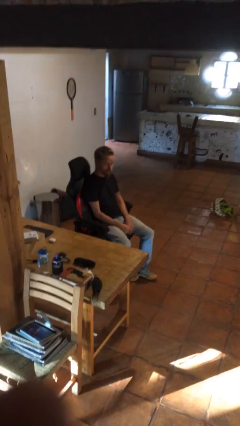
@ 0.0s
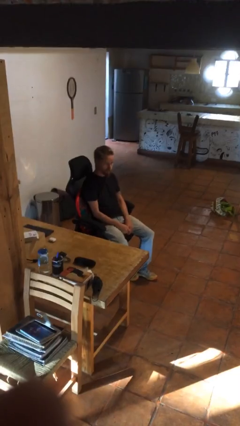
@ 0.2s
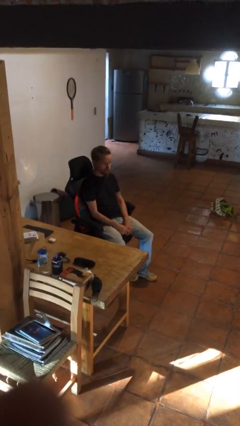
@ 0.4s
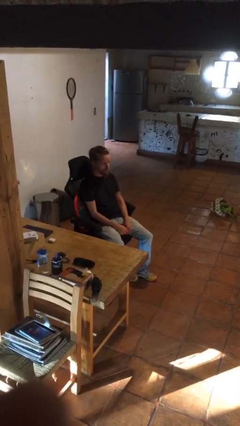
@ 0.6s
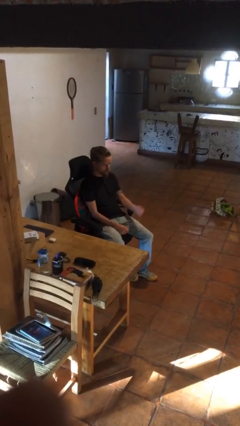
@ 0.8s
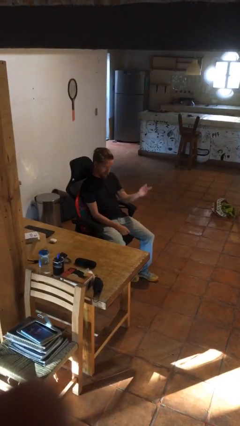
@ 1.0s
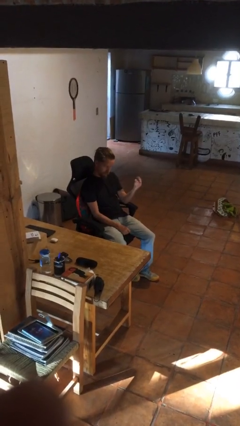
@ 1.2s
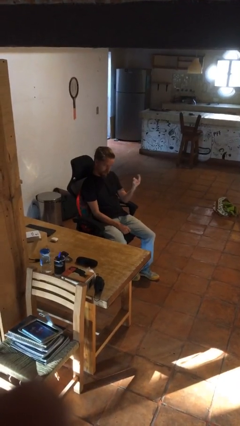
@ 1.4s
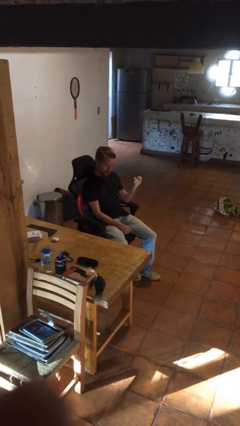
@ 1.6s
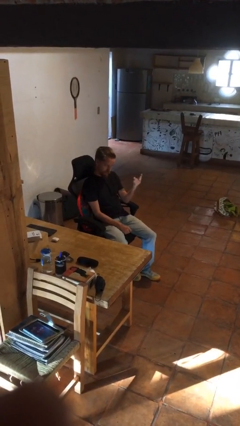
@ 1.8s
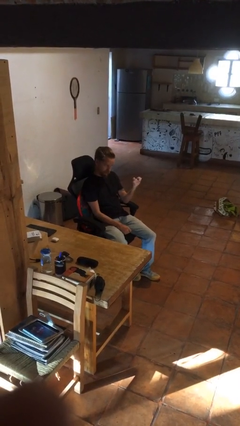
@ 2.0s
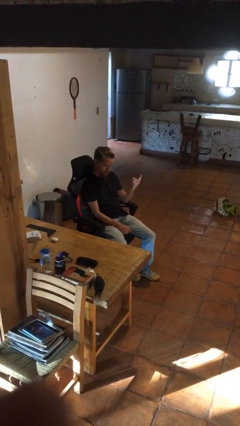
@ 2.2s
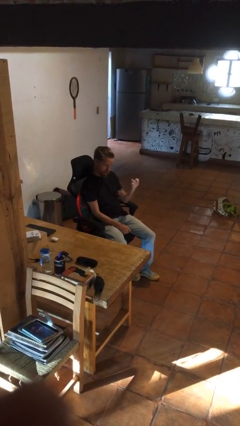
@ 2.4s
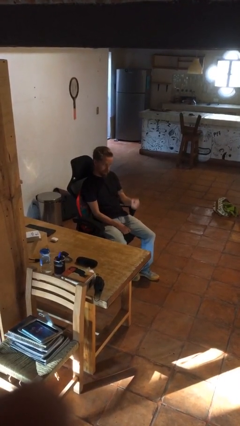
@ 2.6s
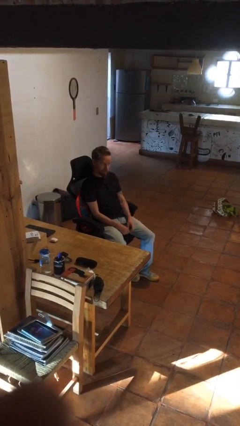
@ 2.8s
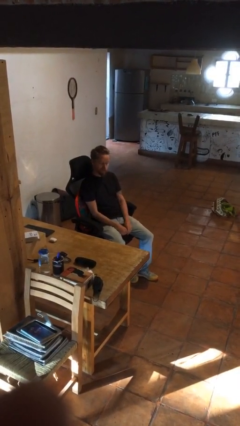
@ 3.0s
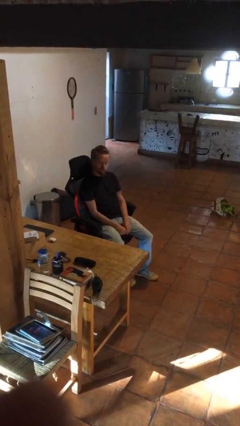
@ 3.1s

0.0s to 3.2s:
person gestures come here

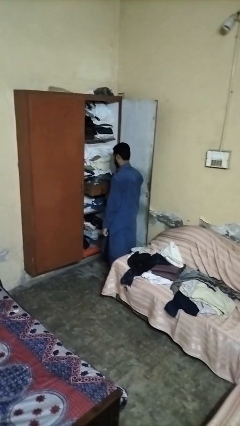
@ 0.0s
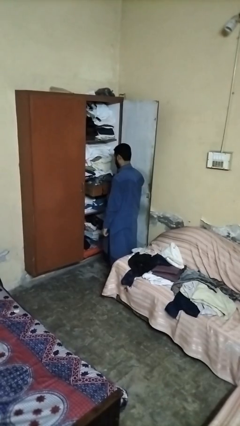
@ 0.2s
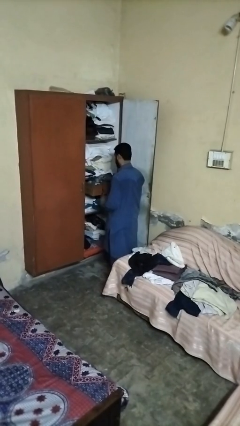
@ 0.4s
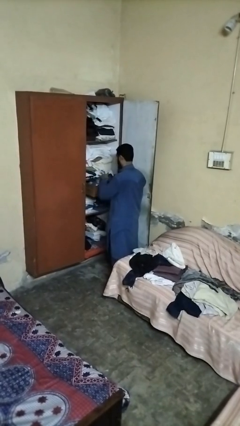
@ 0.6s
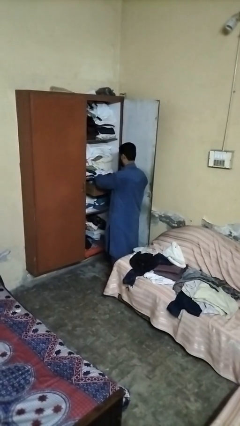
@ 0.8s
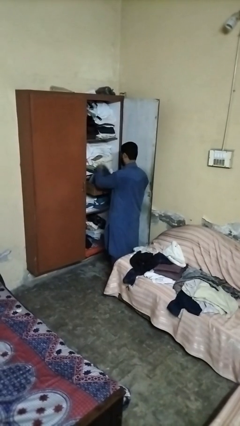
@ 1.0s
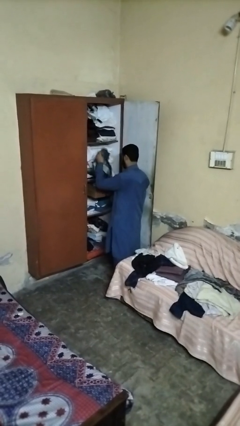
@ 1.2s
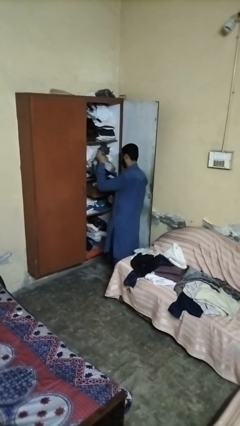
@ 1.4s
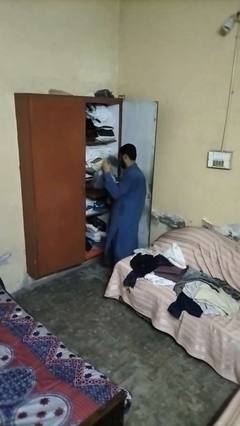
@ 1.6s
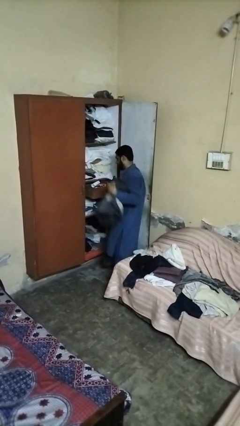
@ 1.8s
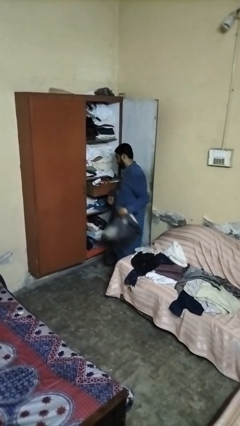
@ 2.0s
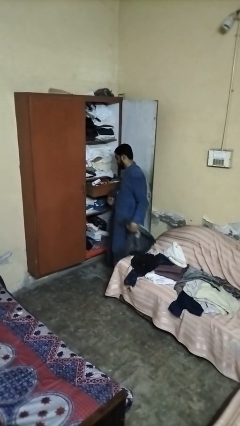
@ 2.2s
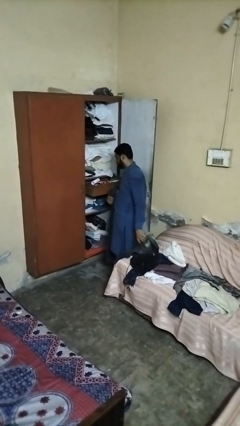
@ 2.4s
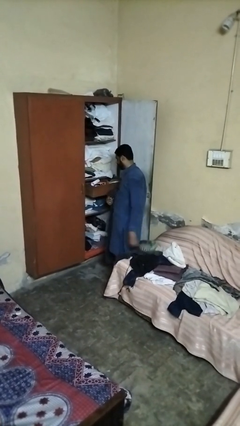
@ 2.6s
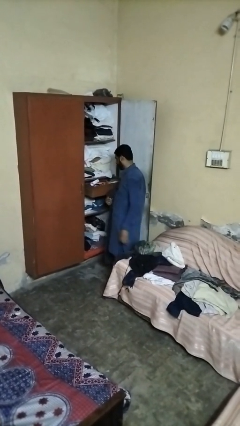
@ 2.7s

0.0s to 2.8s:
person takes clothes from dresser

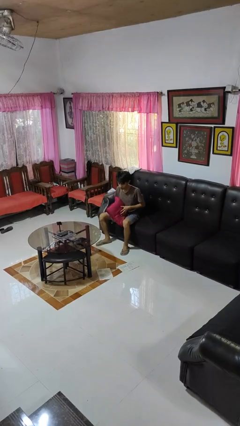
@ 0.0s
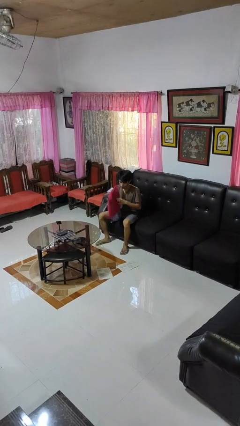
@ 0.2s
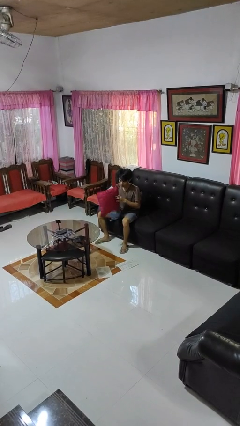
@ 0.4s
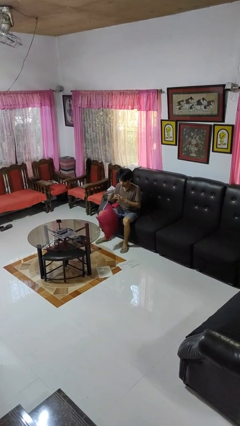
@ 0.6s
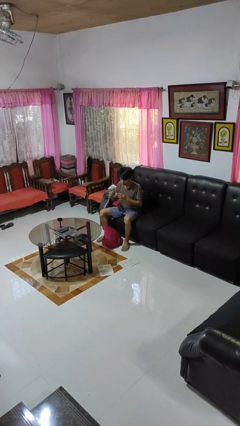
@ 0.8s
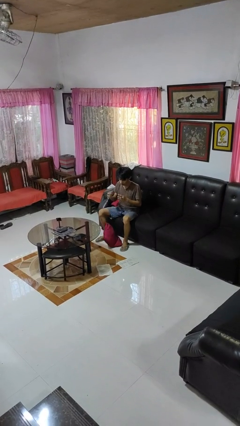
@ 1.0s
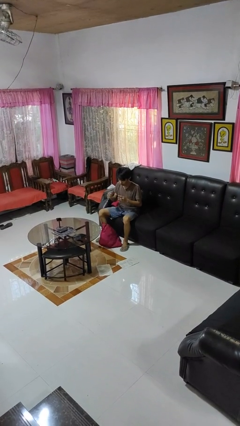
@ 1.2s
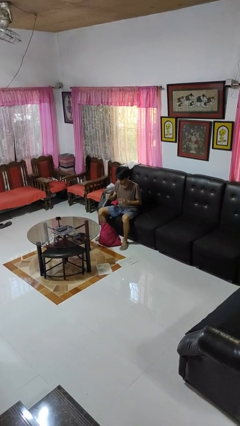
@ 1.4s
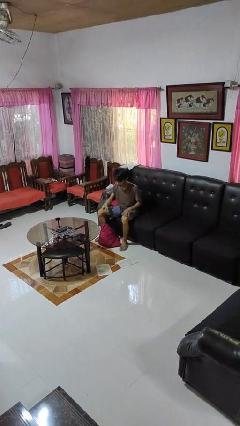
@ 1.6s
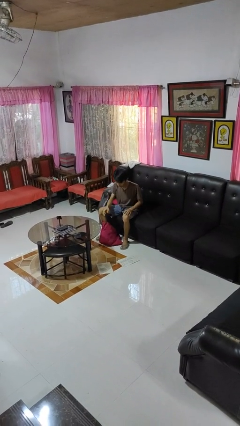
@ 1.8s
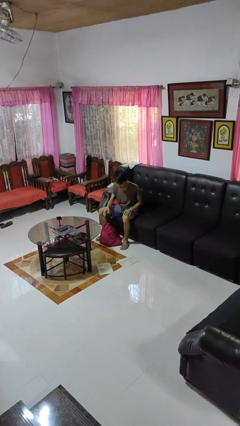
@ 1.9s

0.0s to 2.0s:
person drops object

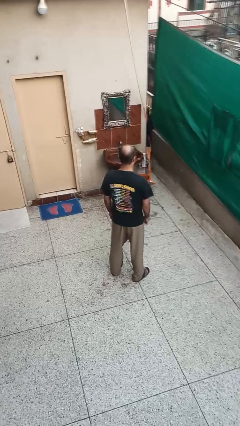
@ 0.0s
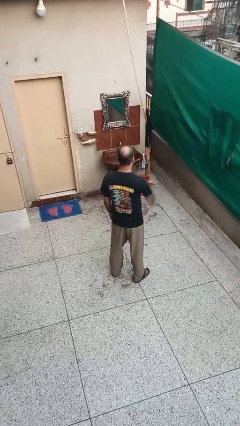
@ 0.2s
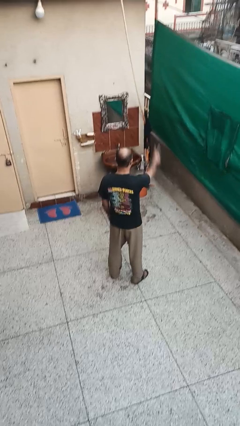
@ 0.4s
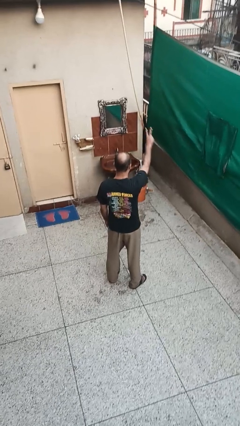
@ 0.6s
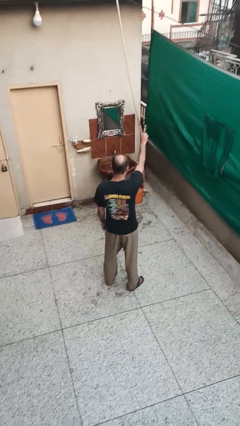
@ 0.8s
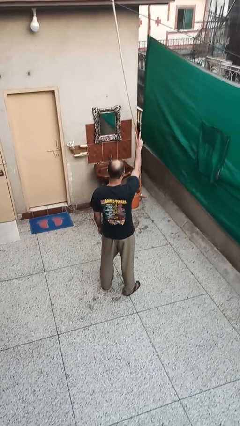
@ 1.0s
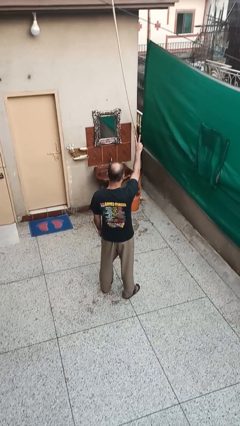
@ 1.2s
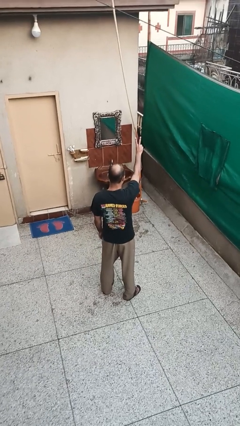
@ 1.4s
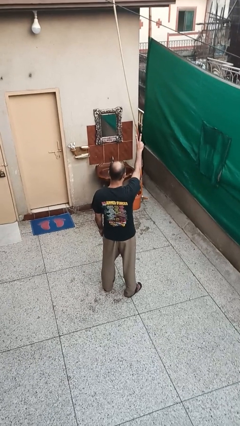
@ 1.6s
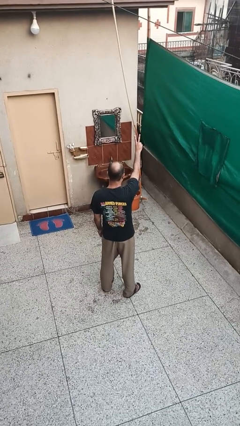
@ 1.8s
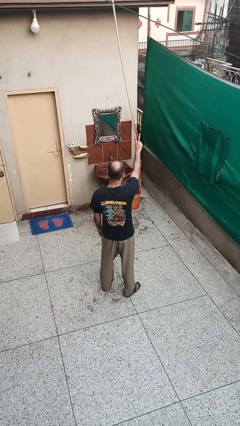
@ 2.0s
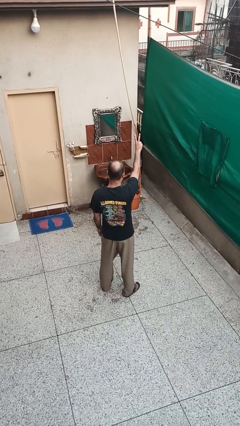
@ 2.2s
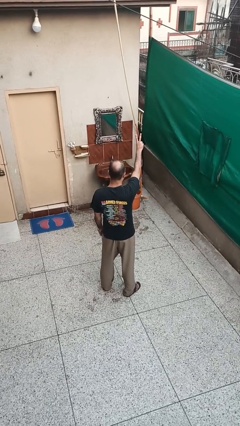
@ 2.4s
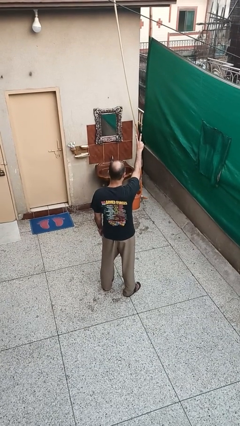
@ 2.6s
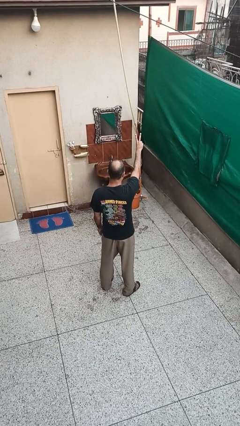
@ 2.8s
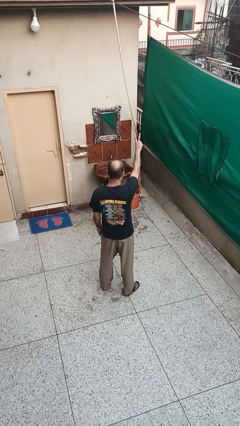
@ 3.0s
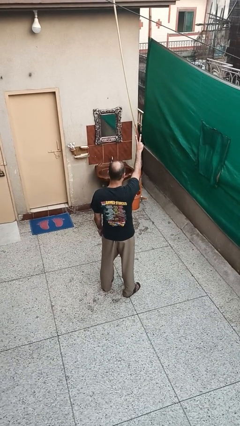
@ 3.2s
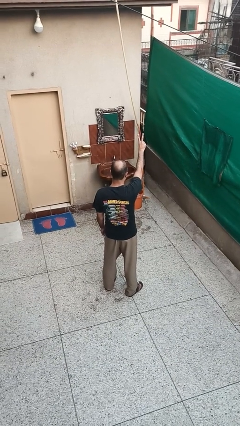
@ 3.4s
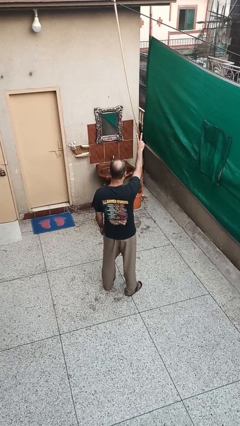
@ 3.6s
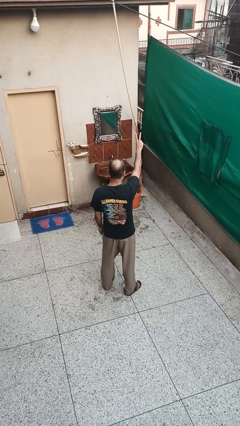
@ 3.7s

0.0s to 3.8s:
person gestures peace

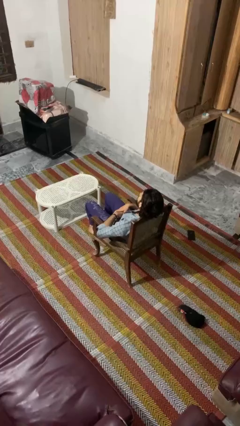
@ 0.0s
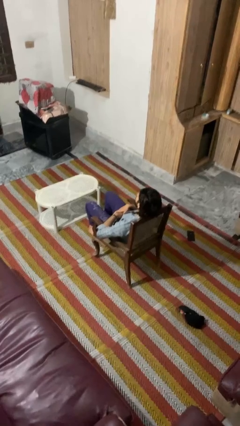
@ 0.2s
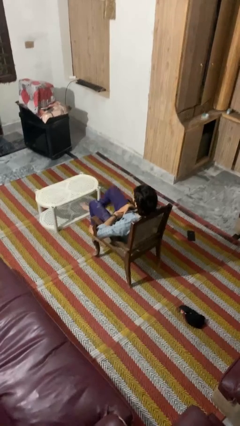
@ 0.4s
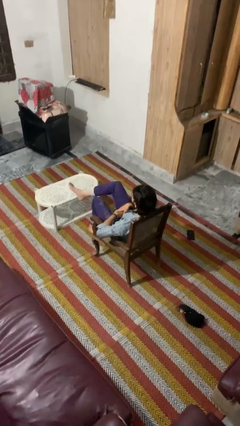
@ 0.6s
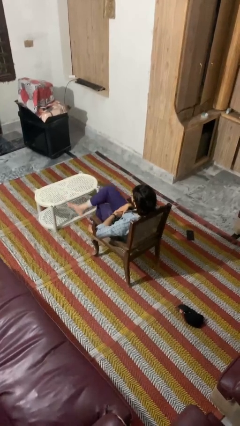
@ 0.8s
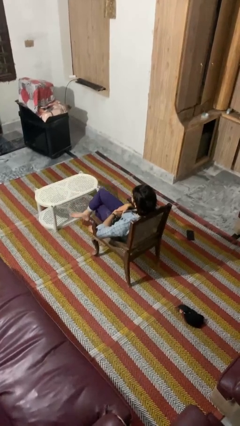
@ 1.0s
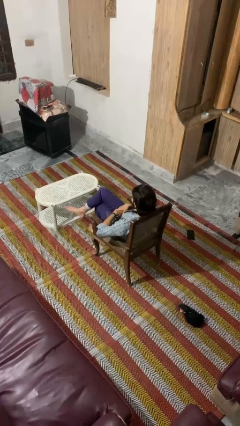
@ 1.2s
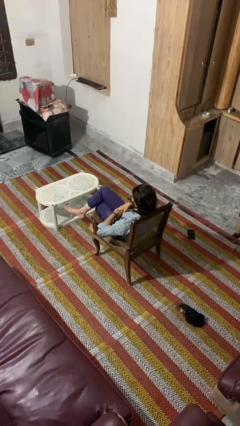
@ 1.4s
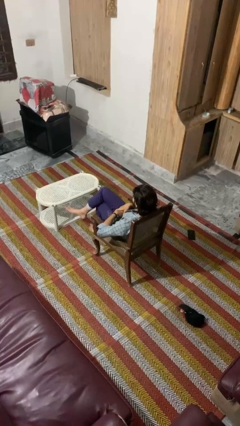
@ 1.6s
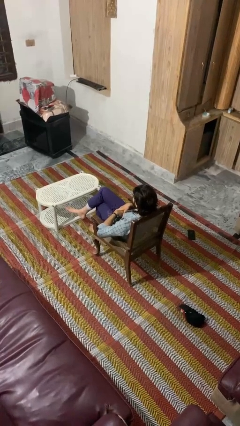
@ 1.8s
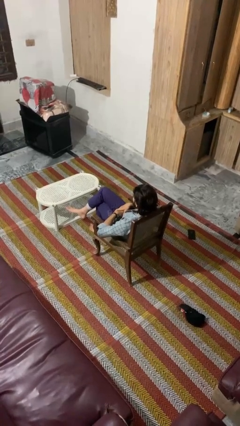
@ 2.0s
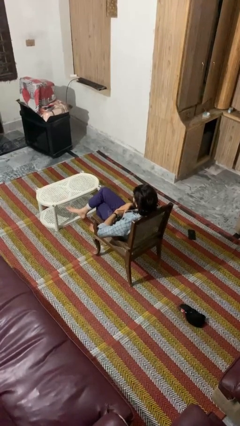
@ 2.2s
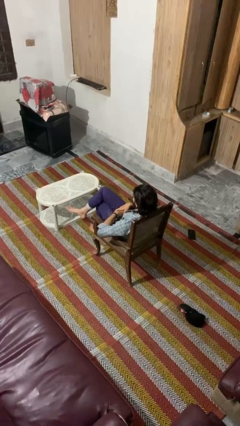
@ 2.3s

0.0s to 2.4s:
person crosses legs

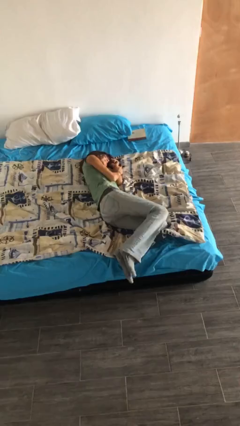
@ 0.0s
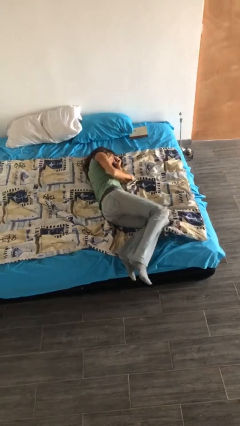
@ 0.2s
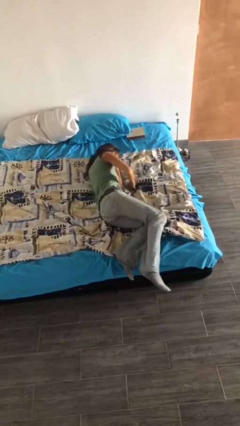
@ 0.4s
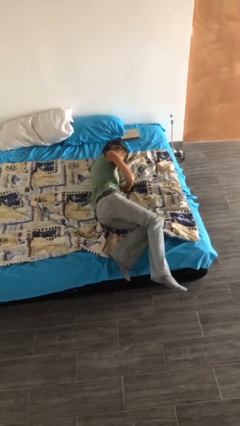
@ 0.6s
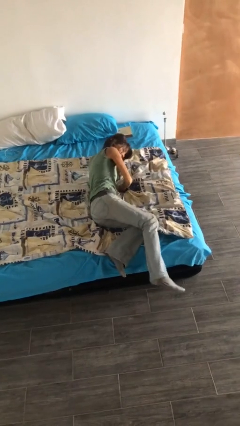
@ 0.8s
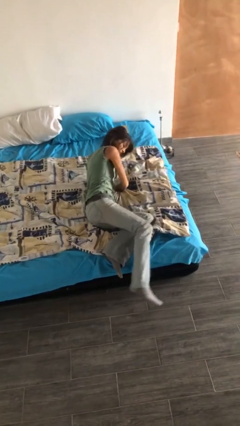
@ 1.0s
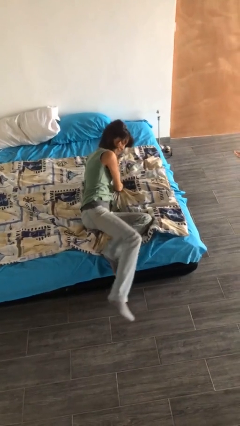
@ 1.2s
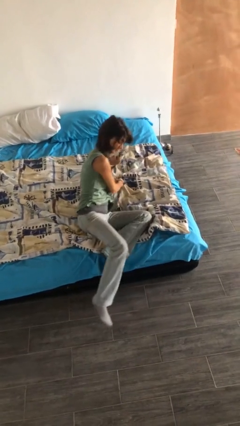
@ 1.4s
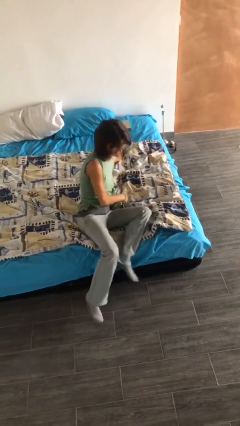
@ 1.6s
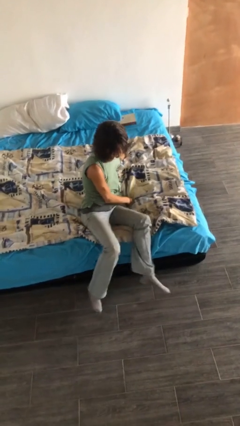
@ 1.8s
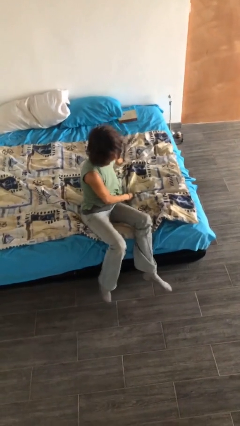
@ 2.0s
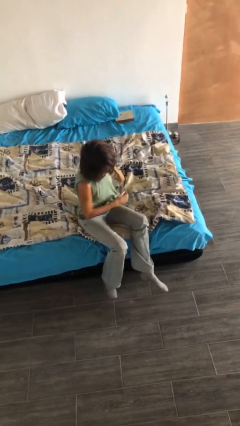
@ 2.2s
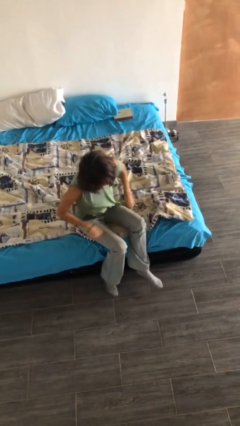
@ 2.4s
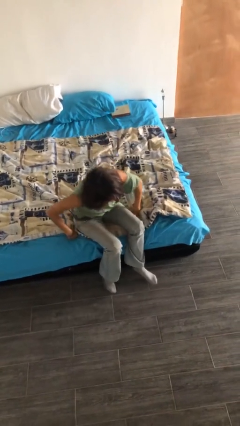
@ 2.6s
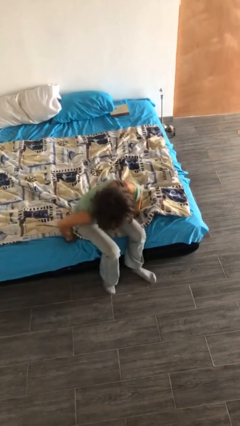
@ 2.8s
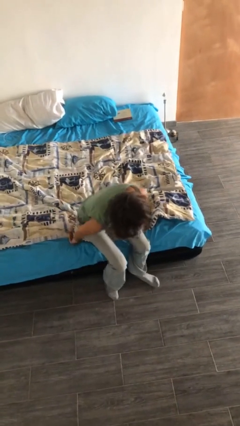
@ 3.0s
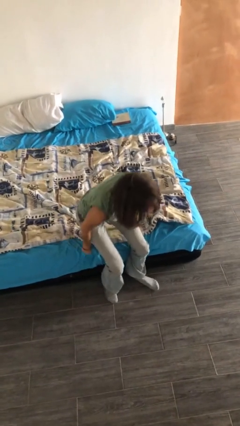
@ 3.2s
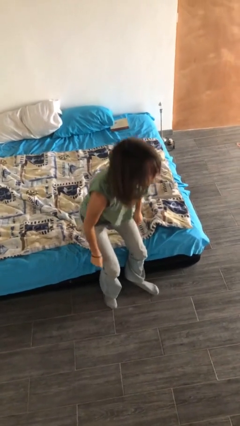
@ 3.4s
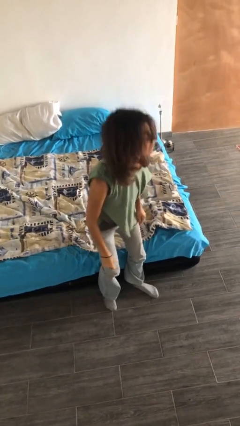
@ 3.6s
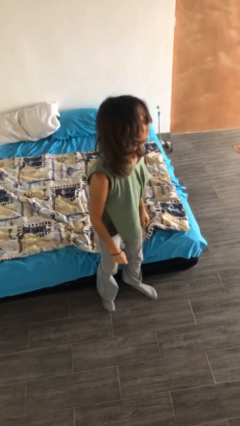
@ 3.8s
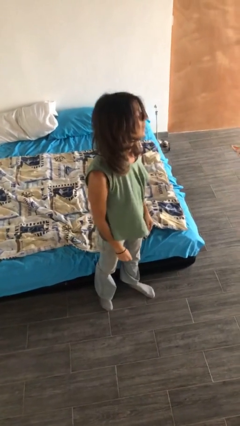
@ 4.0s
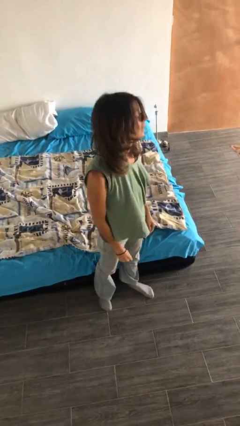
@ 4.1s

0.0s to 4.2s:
person stands up
